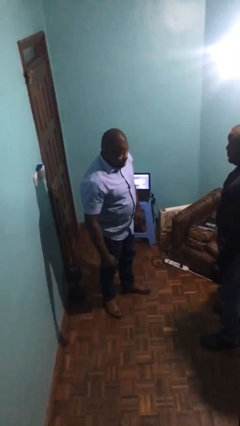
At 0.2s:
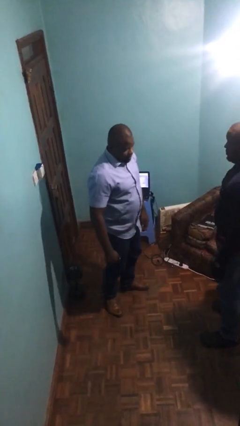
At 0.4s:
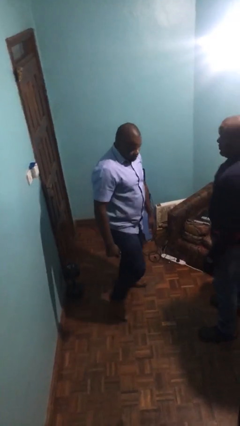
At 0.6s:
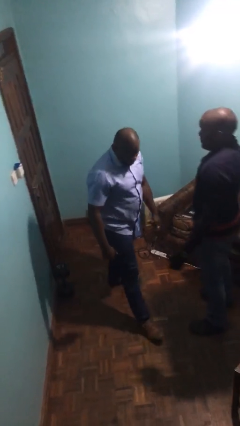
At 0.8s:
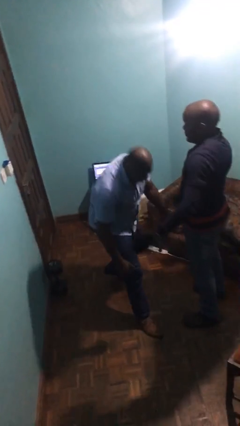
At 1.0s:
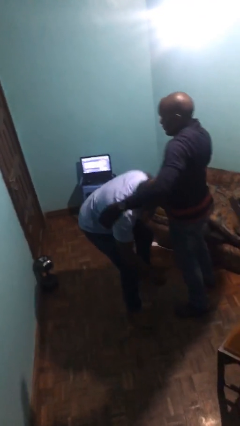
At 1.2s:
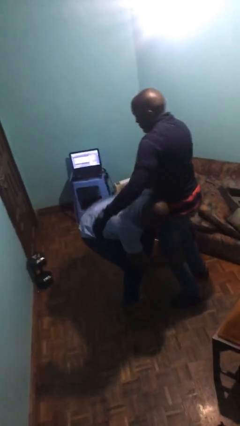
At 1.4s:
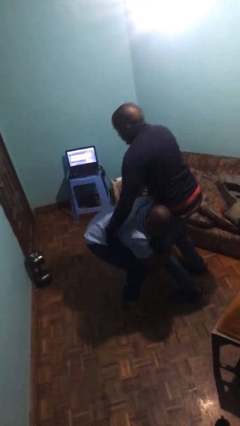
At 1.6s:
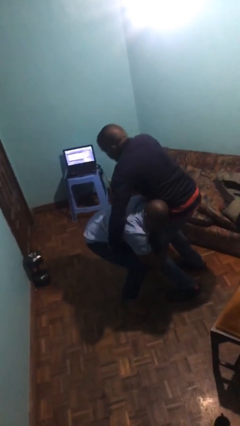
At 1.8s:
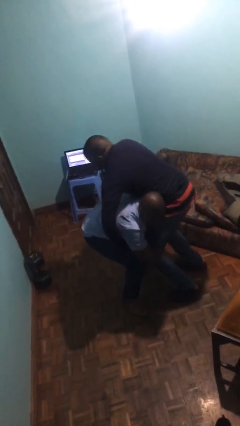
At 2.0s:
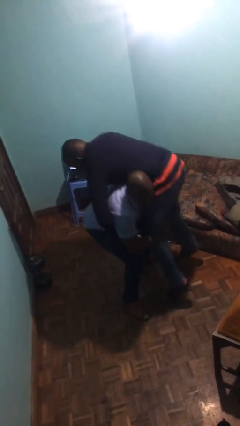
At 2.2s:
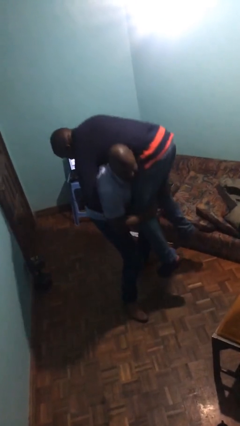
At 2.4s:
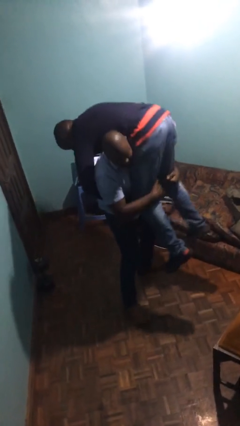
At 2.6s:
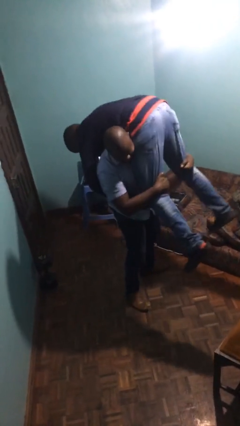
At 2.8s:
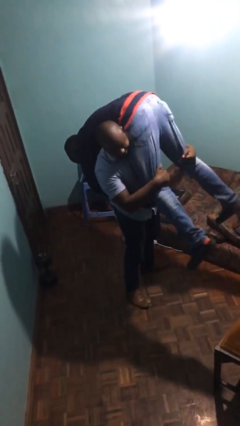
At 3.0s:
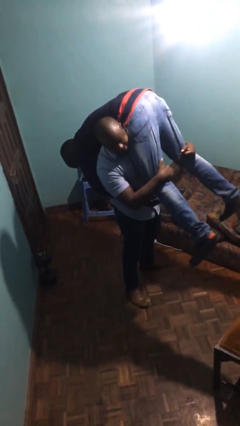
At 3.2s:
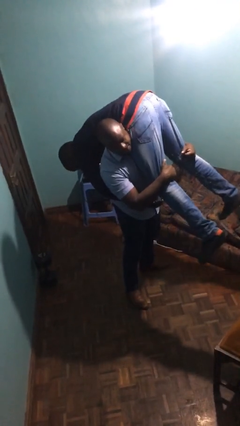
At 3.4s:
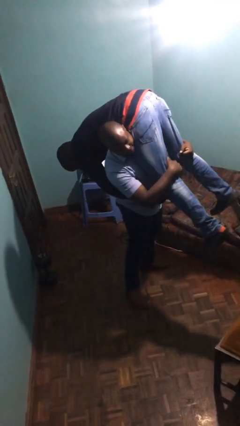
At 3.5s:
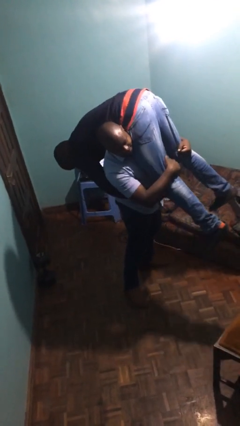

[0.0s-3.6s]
person carries person over shoulder

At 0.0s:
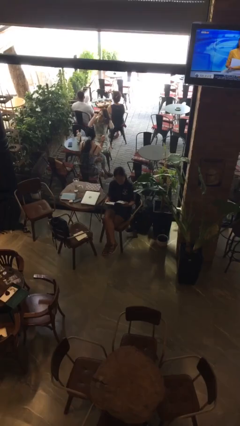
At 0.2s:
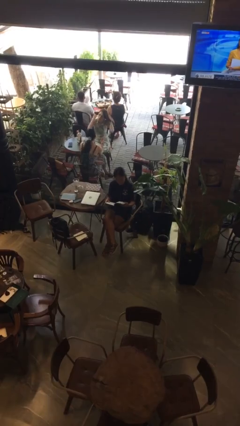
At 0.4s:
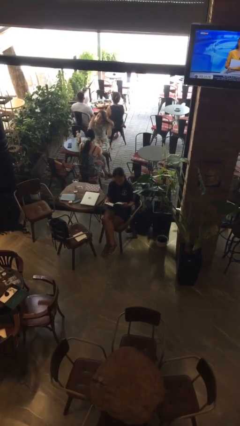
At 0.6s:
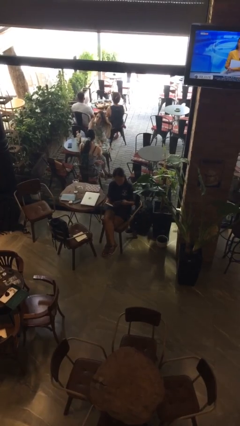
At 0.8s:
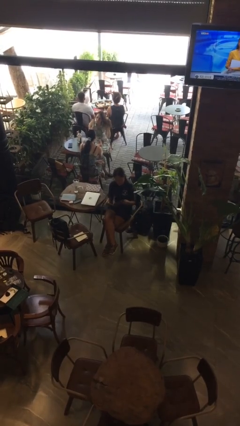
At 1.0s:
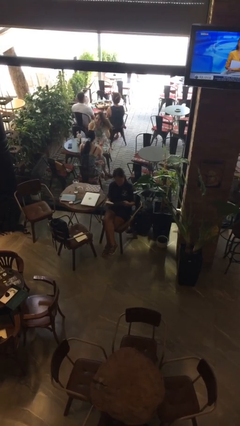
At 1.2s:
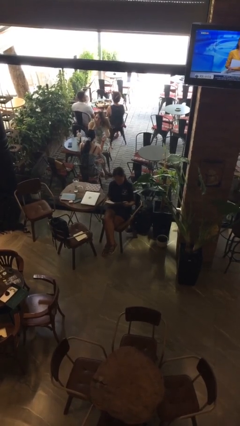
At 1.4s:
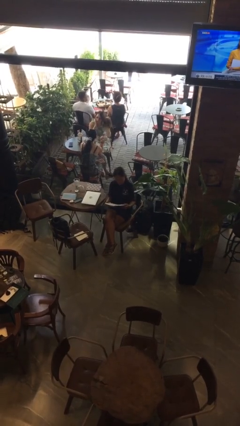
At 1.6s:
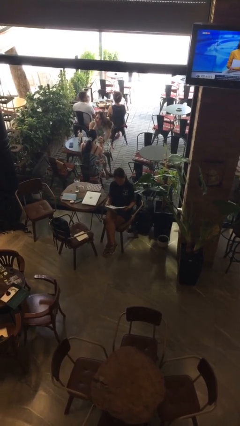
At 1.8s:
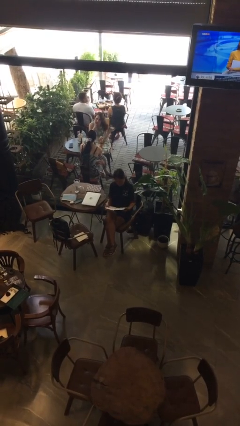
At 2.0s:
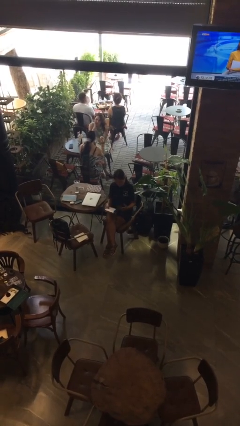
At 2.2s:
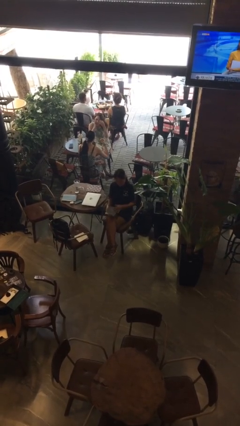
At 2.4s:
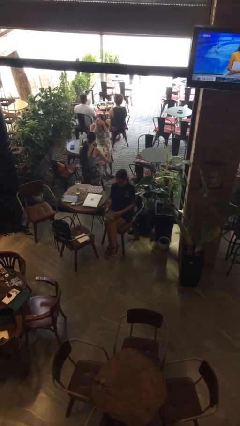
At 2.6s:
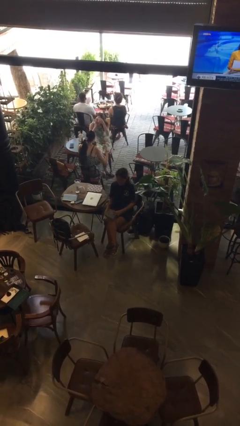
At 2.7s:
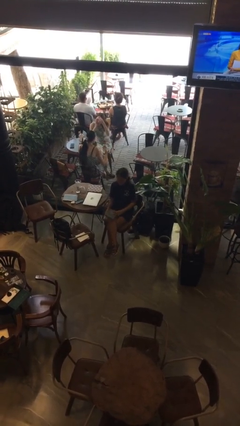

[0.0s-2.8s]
person reads book

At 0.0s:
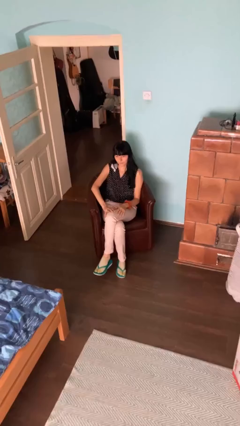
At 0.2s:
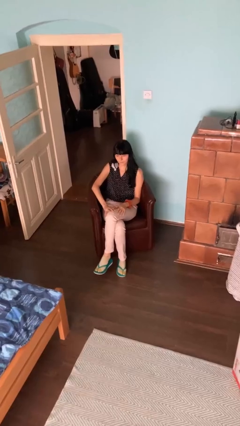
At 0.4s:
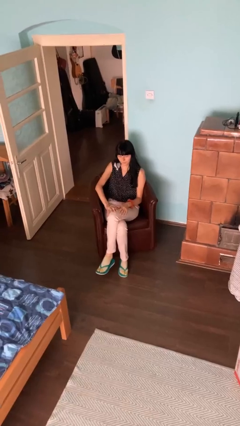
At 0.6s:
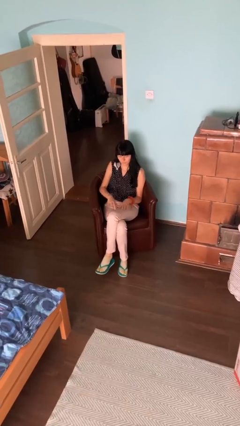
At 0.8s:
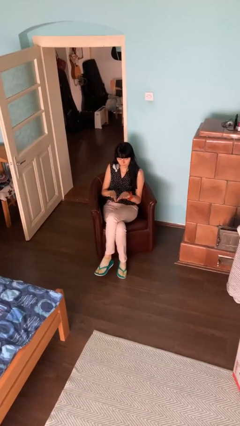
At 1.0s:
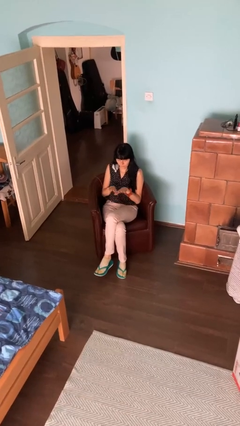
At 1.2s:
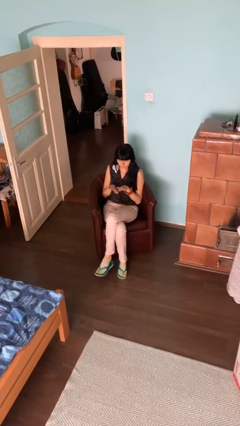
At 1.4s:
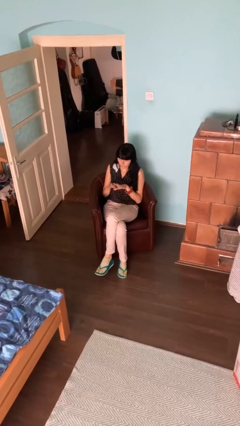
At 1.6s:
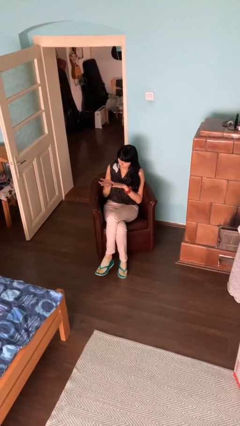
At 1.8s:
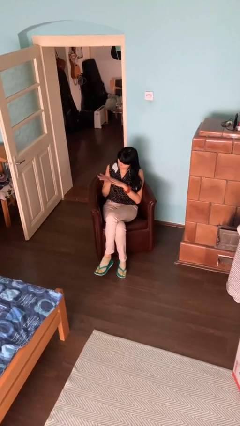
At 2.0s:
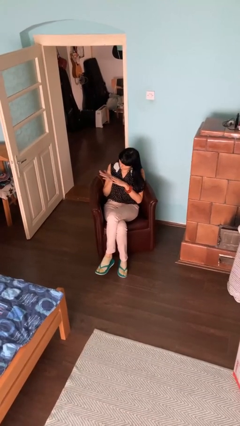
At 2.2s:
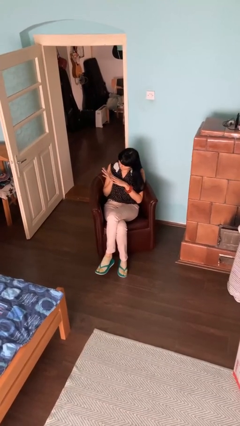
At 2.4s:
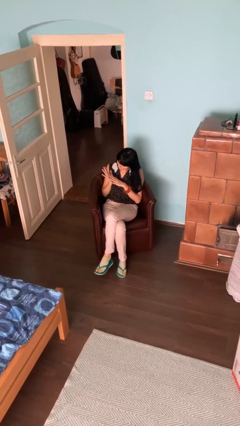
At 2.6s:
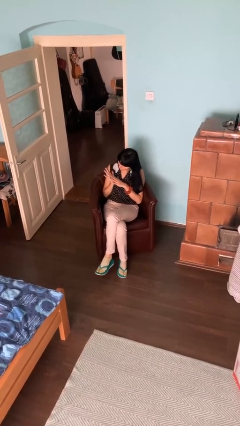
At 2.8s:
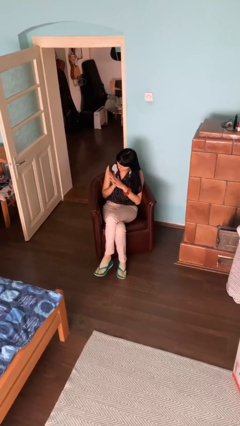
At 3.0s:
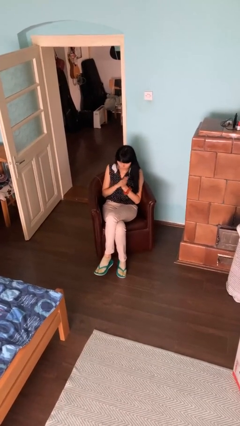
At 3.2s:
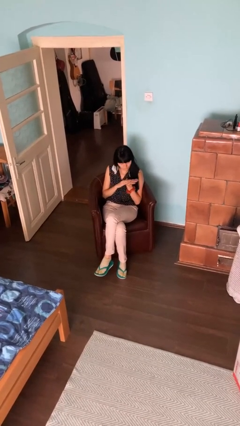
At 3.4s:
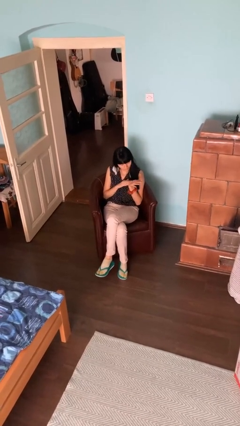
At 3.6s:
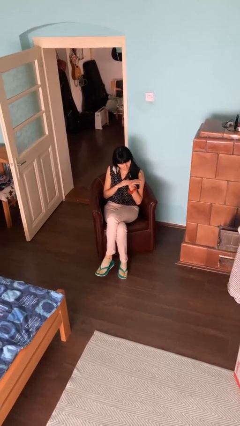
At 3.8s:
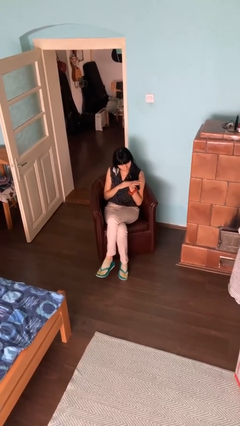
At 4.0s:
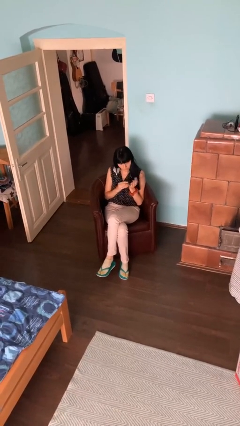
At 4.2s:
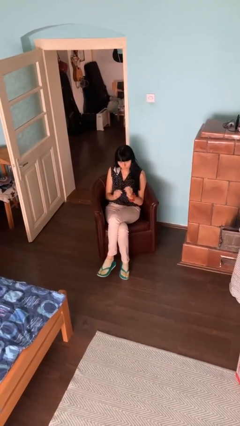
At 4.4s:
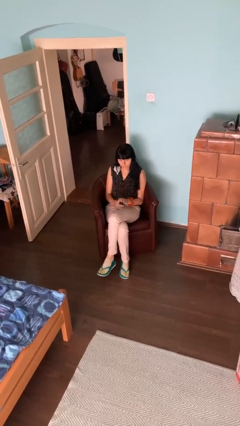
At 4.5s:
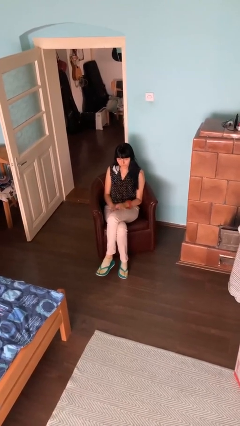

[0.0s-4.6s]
person looks at hands in lap

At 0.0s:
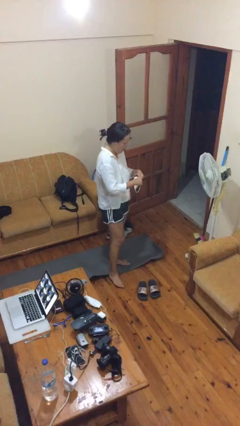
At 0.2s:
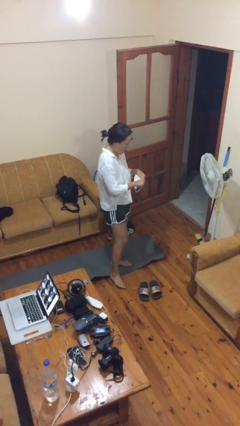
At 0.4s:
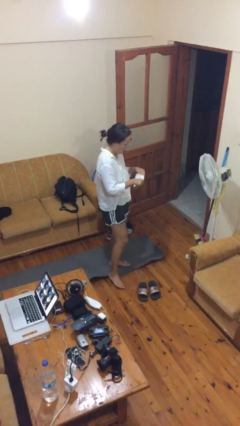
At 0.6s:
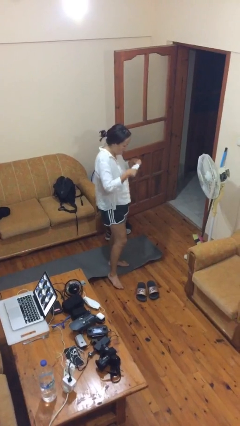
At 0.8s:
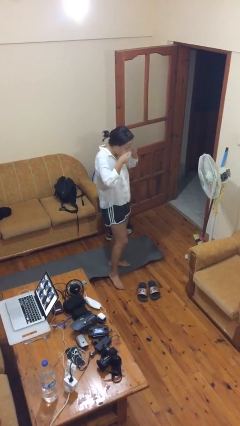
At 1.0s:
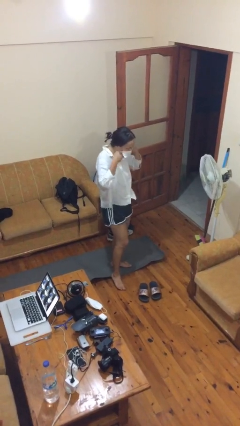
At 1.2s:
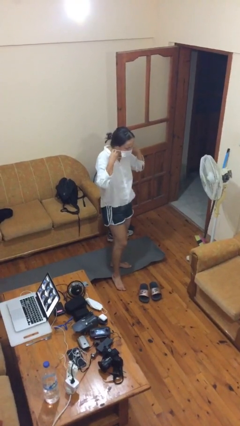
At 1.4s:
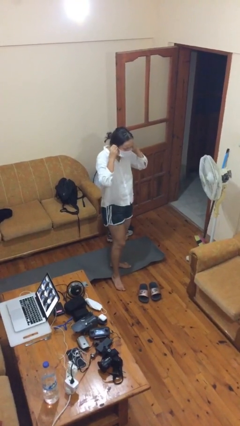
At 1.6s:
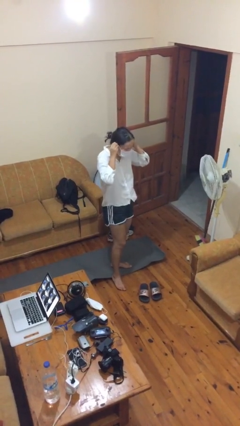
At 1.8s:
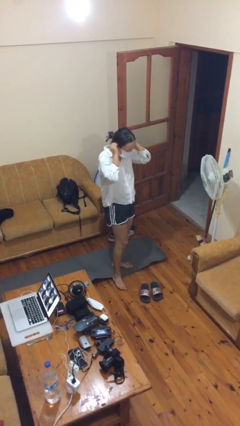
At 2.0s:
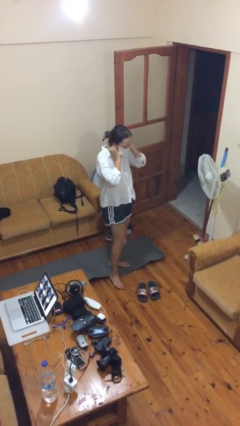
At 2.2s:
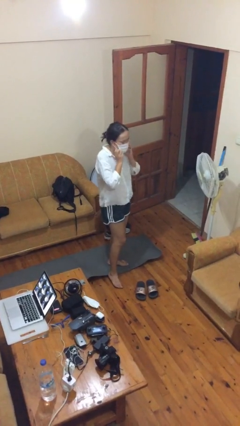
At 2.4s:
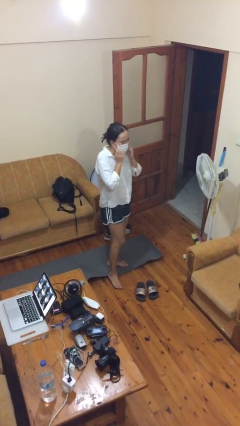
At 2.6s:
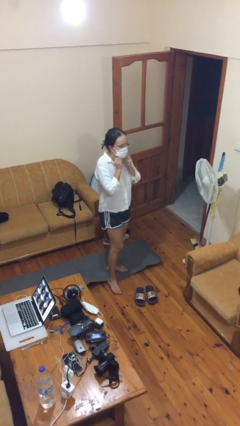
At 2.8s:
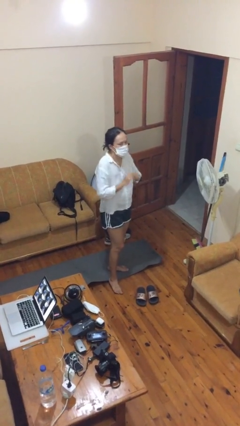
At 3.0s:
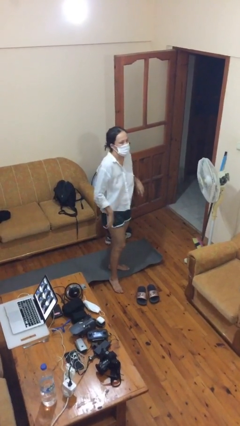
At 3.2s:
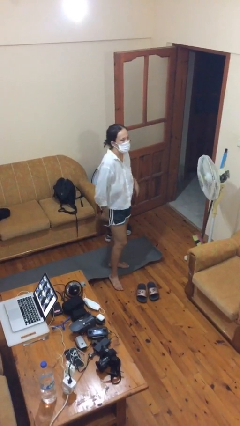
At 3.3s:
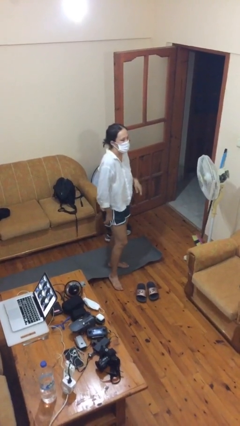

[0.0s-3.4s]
person puts on facemask

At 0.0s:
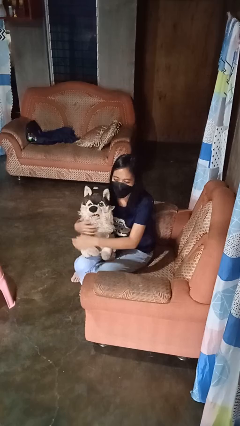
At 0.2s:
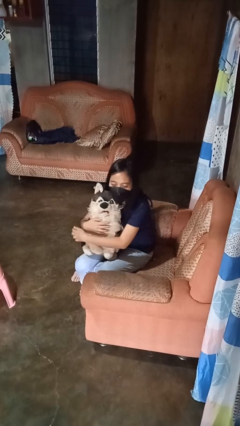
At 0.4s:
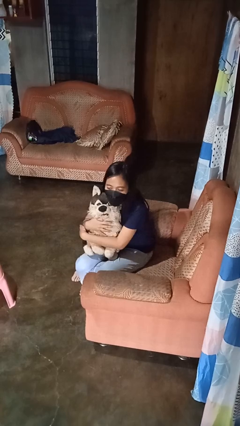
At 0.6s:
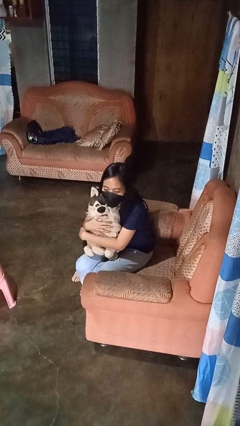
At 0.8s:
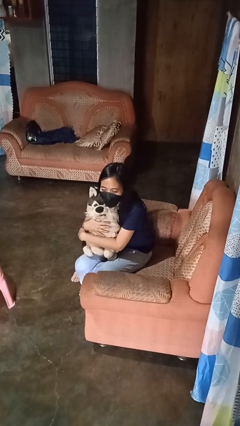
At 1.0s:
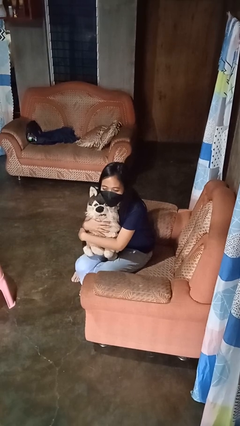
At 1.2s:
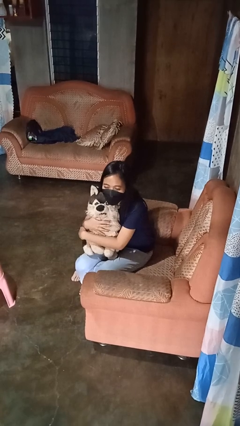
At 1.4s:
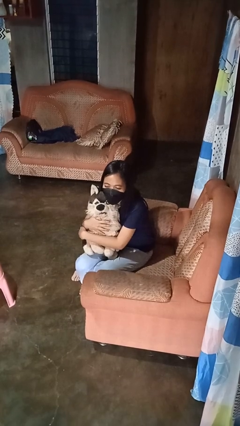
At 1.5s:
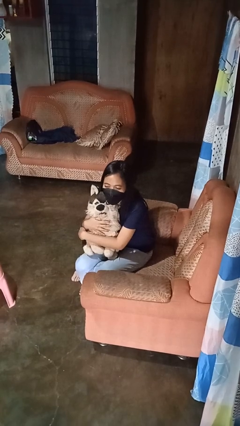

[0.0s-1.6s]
person hugs stuffed animal

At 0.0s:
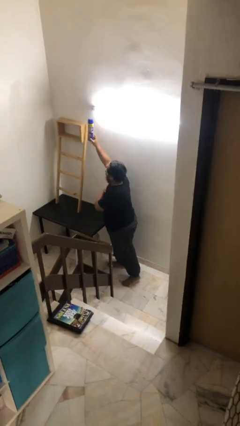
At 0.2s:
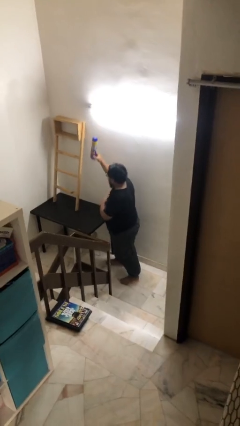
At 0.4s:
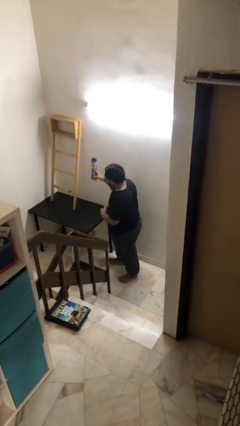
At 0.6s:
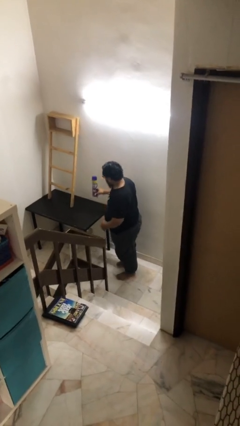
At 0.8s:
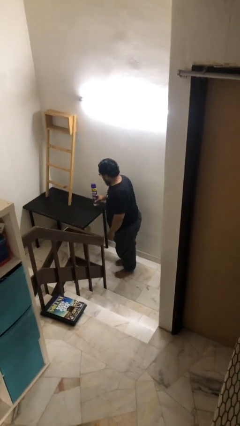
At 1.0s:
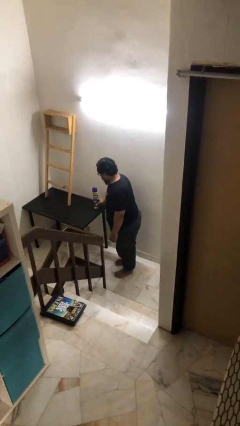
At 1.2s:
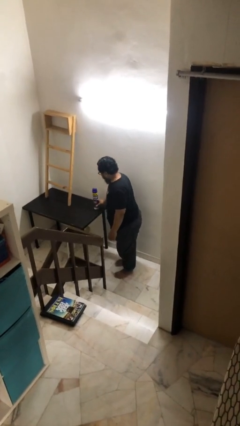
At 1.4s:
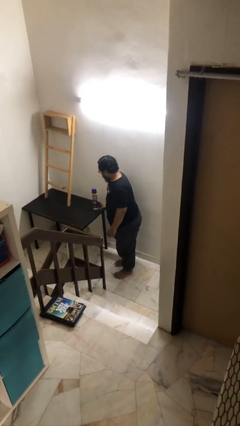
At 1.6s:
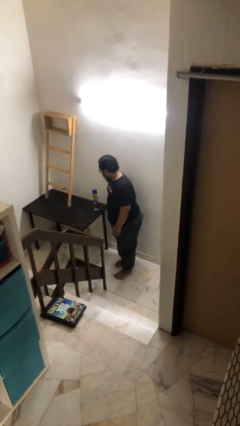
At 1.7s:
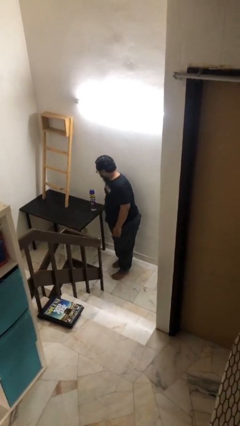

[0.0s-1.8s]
person puts down object on table

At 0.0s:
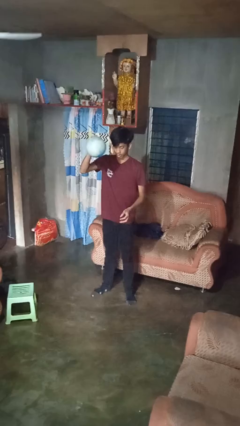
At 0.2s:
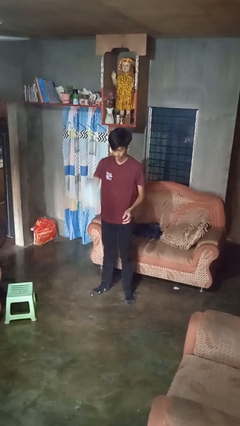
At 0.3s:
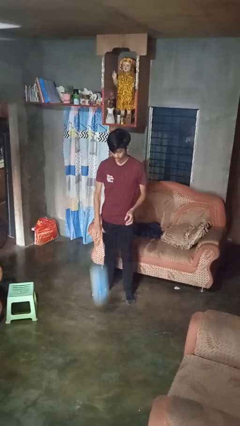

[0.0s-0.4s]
person bounces ball on floor
